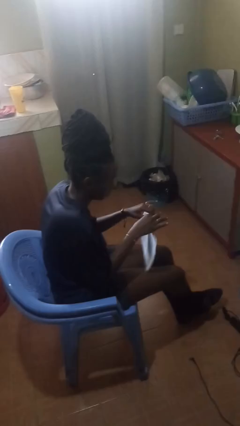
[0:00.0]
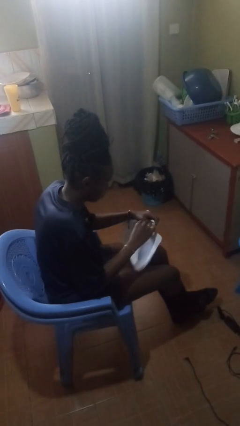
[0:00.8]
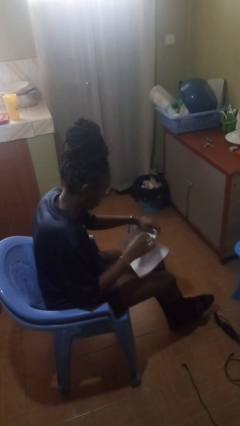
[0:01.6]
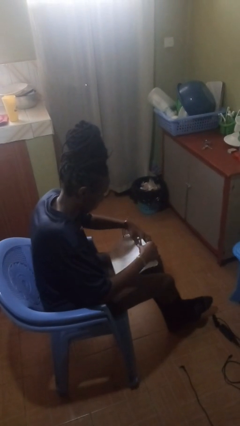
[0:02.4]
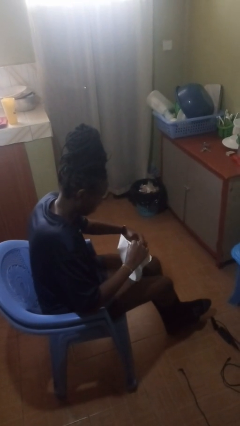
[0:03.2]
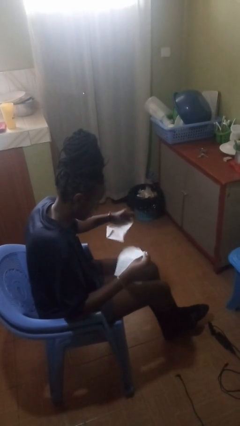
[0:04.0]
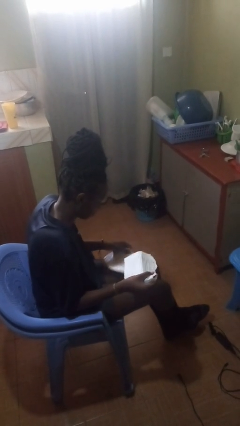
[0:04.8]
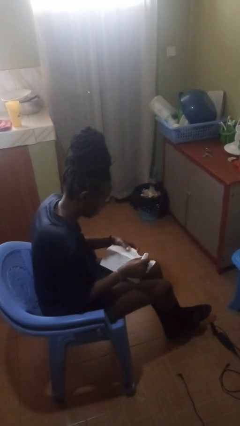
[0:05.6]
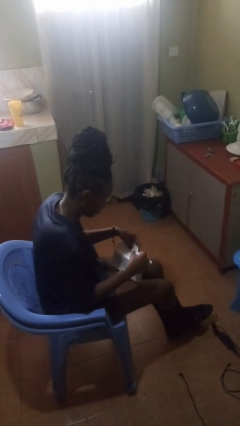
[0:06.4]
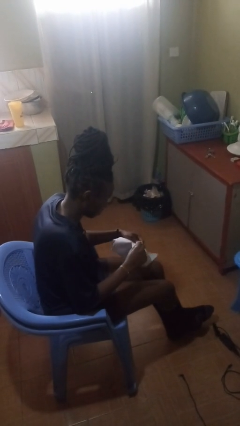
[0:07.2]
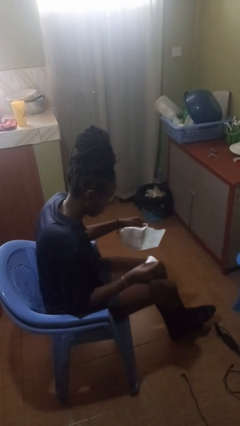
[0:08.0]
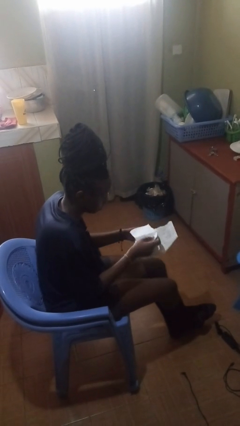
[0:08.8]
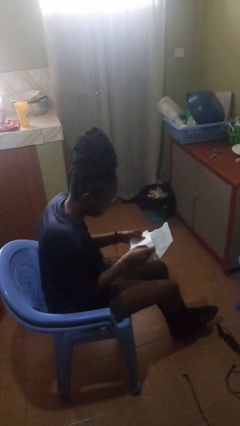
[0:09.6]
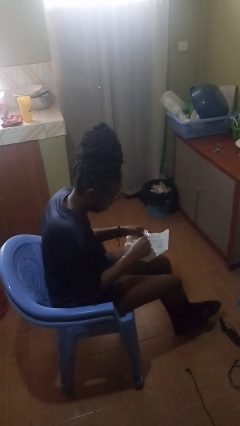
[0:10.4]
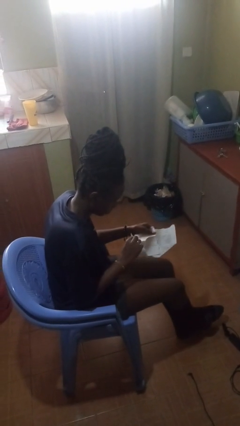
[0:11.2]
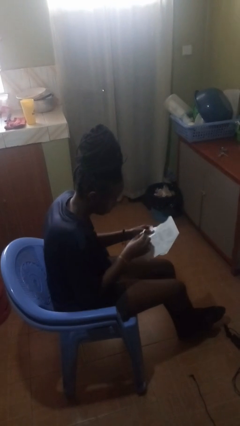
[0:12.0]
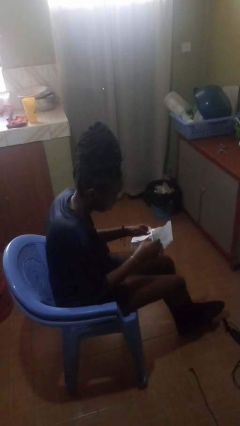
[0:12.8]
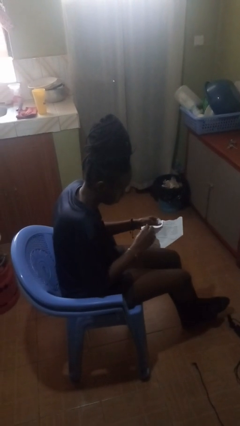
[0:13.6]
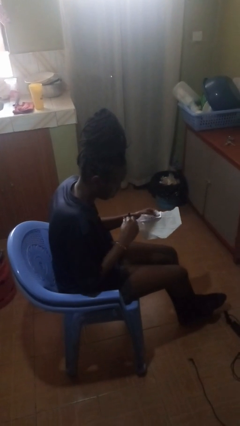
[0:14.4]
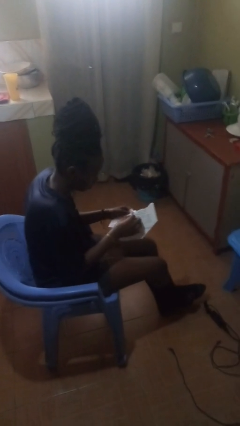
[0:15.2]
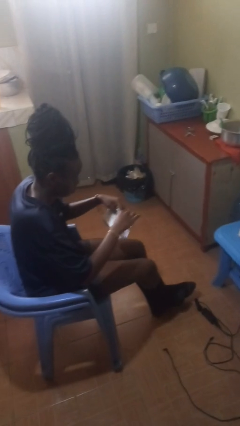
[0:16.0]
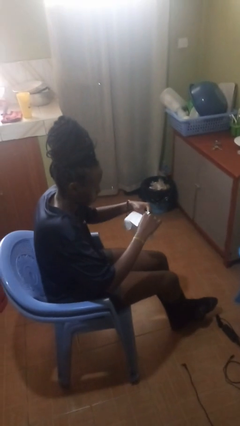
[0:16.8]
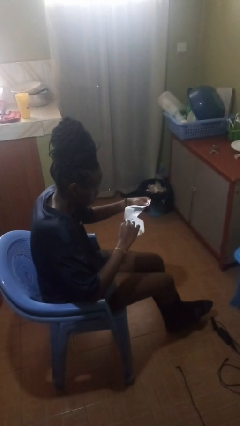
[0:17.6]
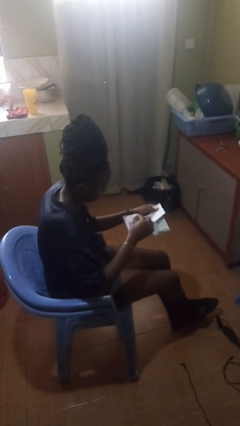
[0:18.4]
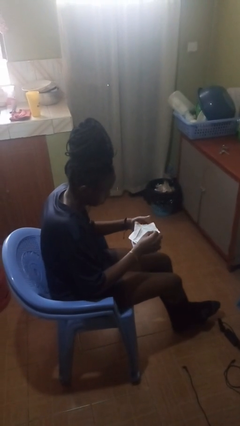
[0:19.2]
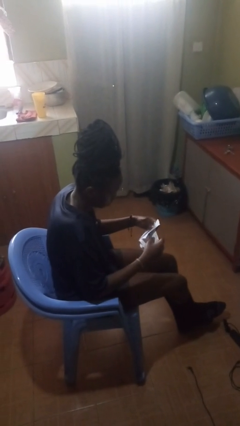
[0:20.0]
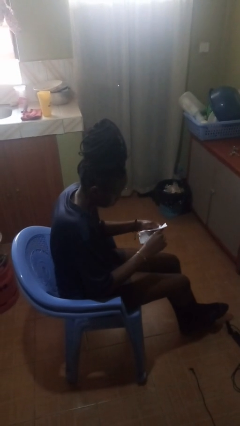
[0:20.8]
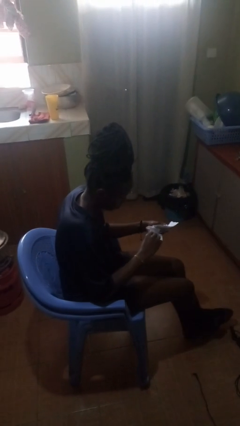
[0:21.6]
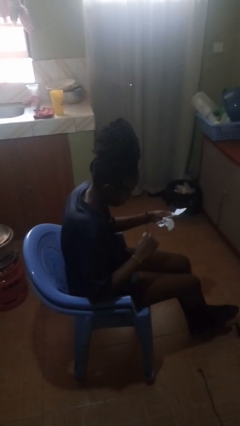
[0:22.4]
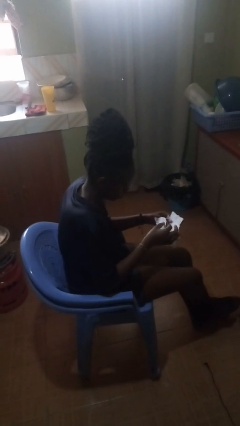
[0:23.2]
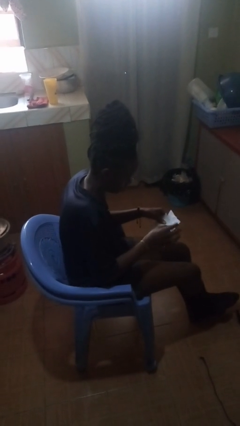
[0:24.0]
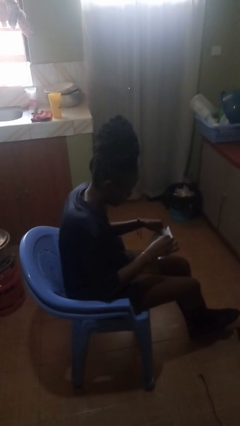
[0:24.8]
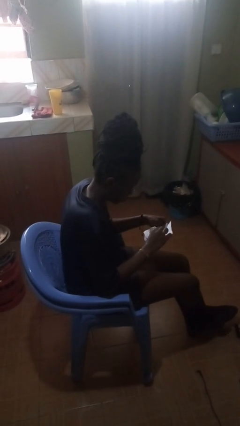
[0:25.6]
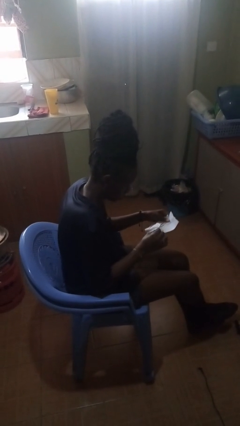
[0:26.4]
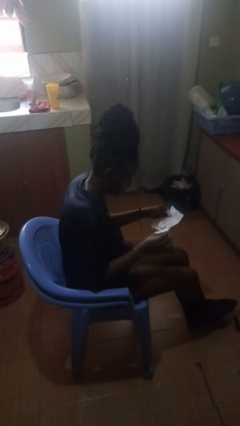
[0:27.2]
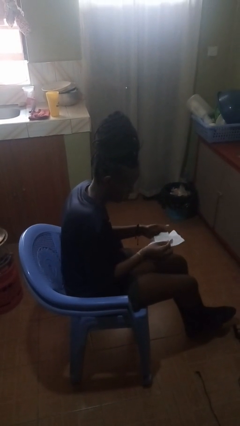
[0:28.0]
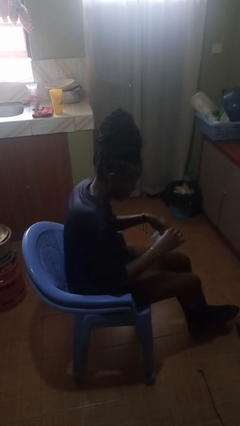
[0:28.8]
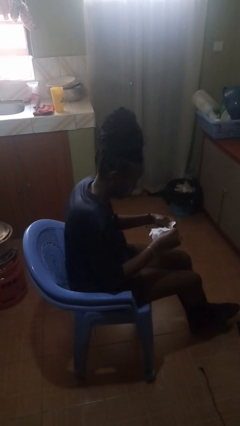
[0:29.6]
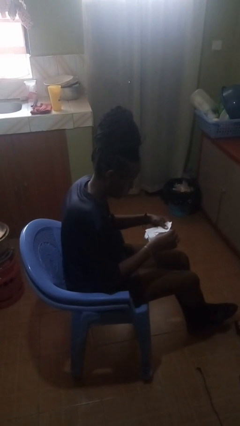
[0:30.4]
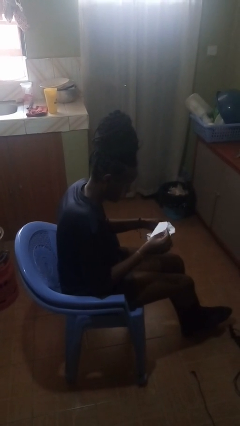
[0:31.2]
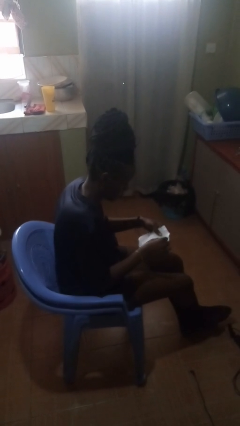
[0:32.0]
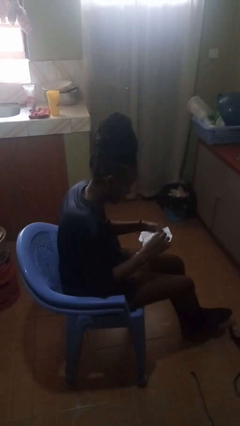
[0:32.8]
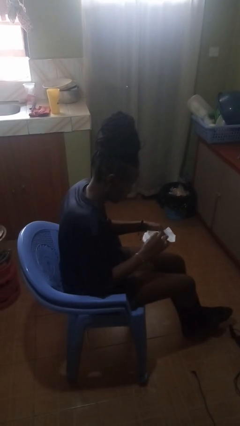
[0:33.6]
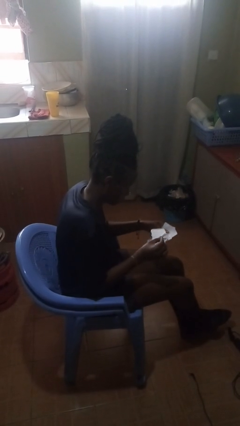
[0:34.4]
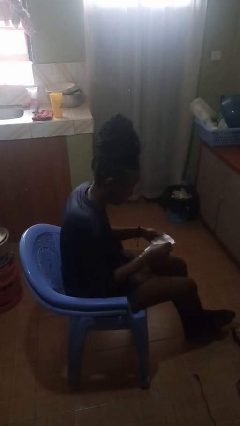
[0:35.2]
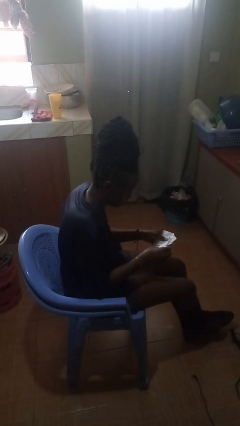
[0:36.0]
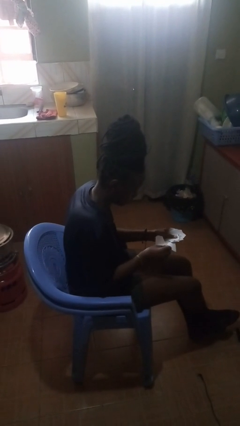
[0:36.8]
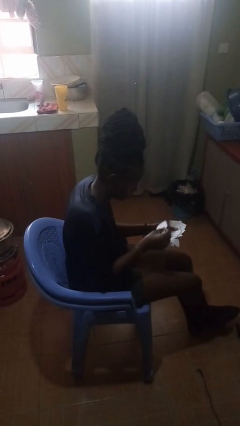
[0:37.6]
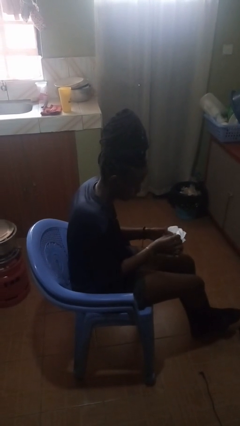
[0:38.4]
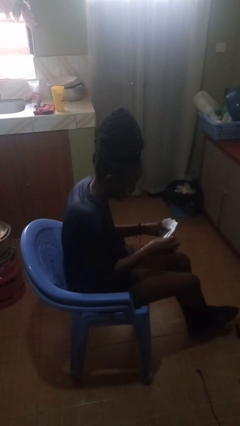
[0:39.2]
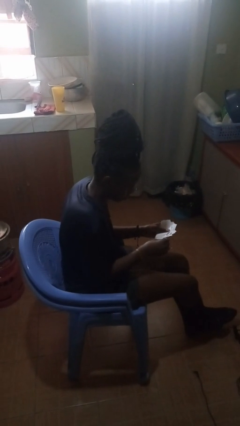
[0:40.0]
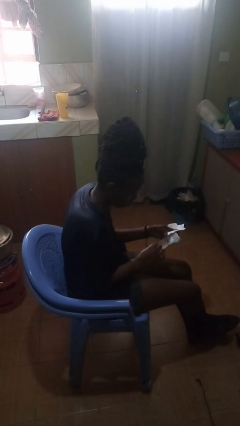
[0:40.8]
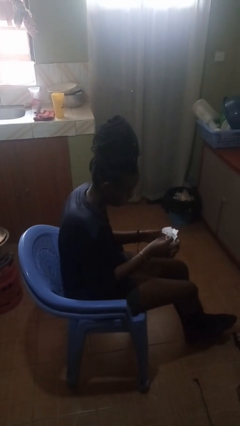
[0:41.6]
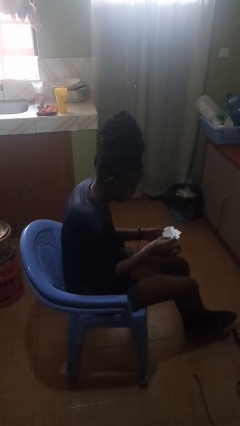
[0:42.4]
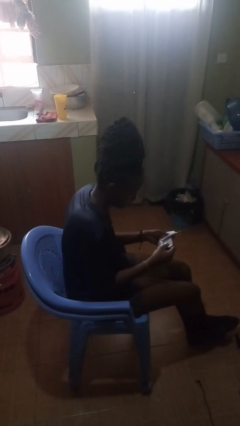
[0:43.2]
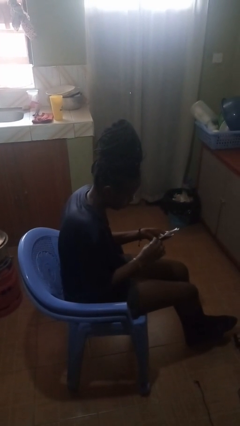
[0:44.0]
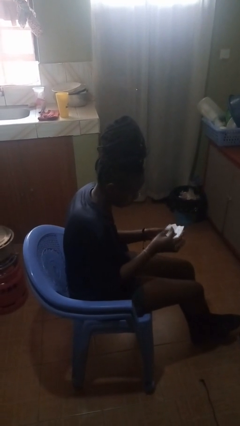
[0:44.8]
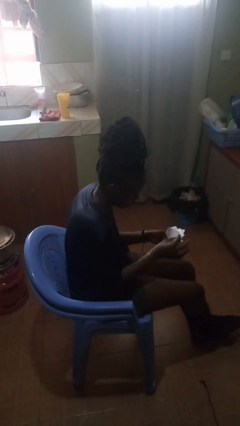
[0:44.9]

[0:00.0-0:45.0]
person tears paper

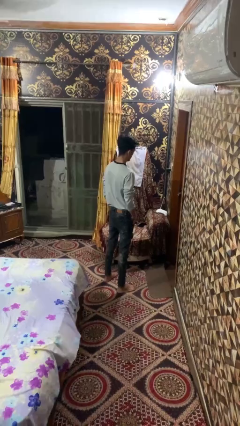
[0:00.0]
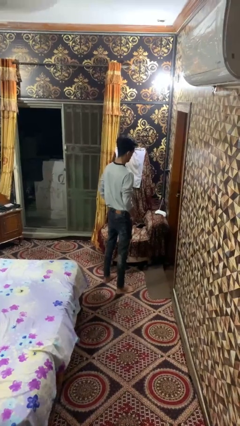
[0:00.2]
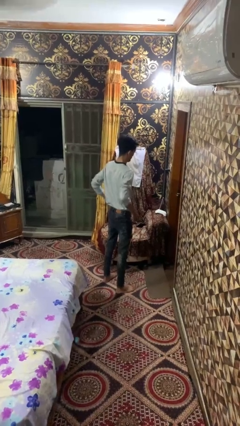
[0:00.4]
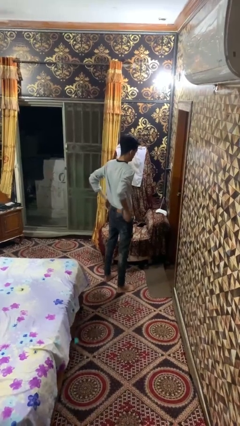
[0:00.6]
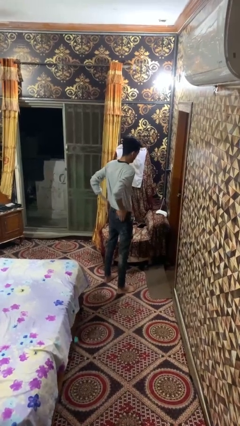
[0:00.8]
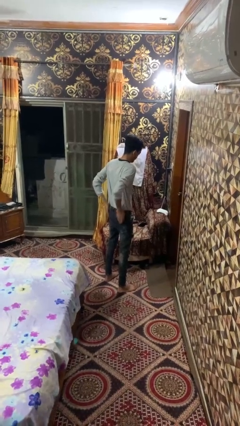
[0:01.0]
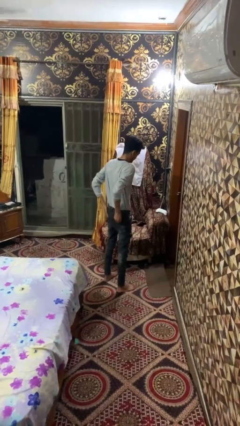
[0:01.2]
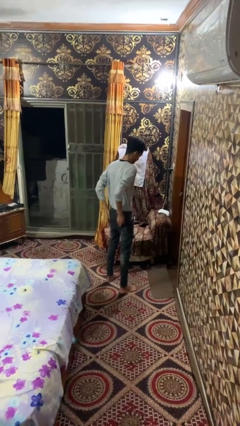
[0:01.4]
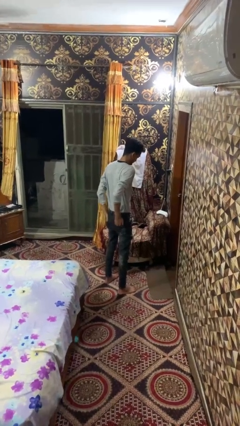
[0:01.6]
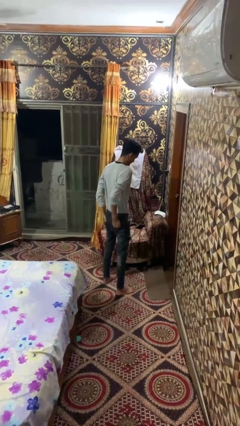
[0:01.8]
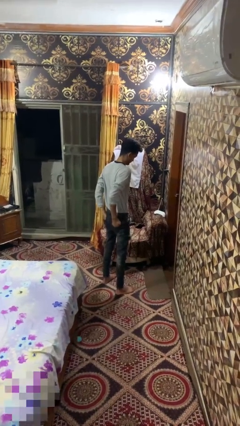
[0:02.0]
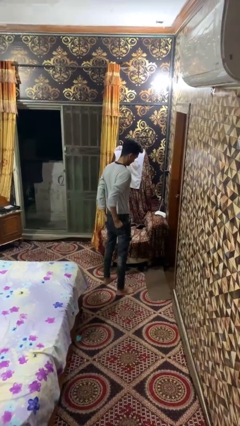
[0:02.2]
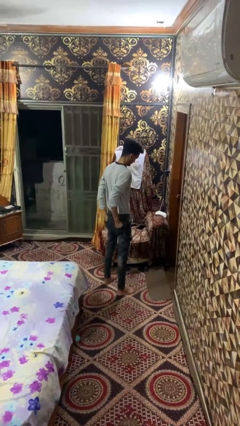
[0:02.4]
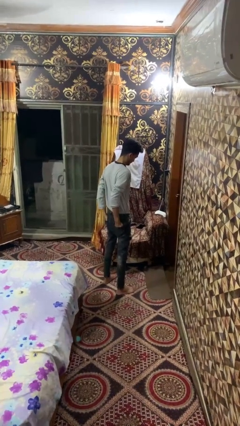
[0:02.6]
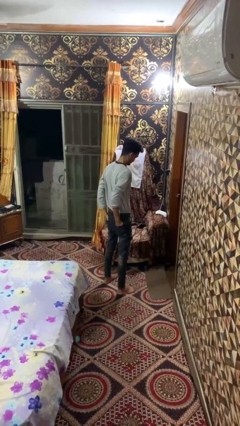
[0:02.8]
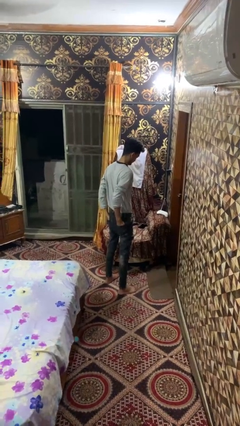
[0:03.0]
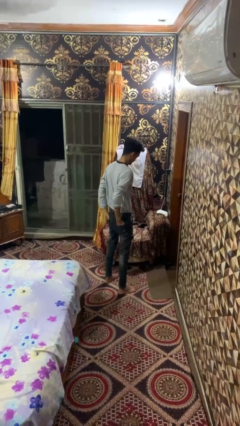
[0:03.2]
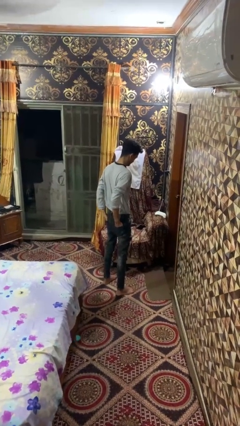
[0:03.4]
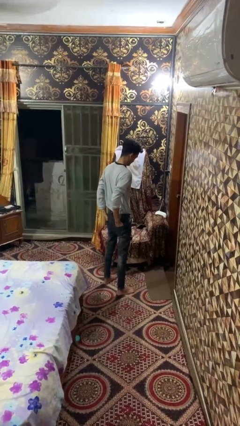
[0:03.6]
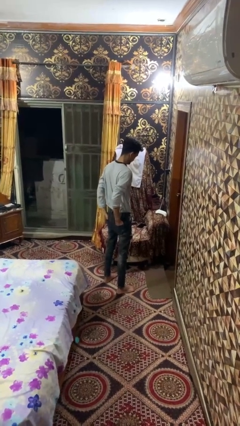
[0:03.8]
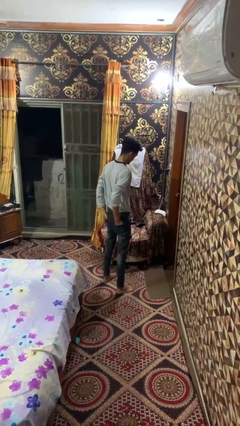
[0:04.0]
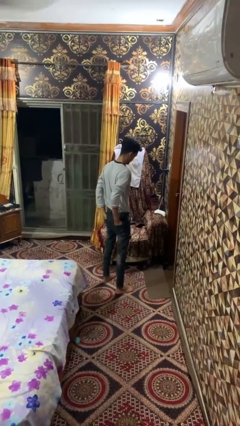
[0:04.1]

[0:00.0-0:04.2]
person puts hands in back pockets

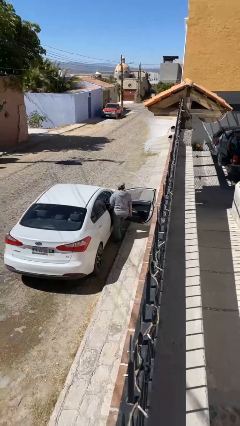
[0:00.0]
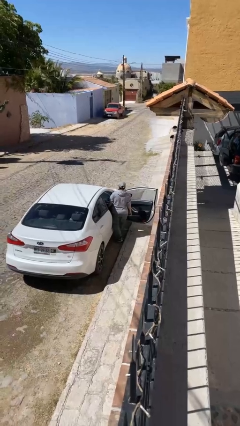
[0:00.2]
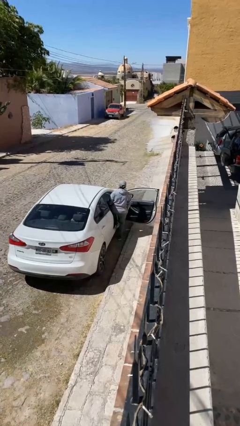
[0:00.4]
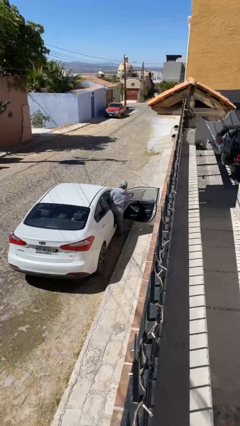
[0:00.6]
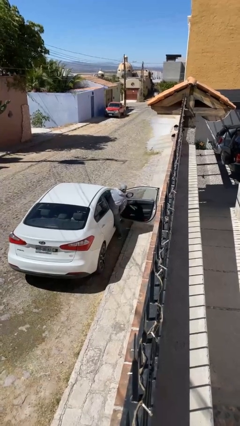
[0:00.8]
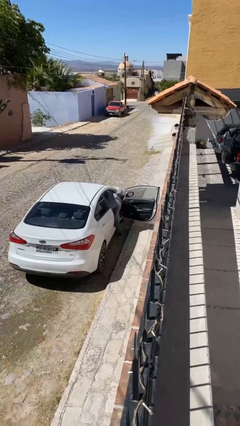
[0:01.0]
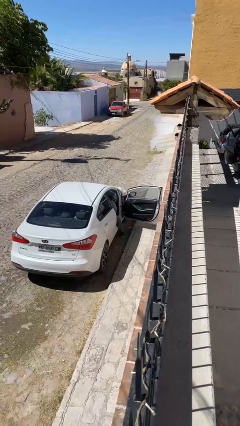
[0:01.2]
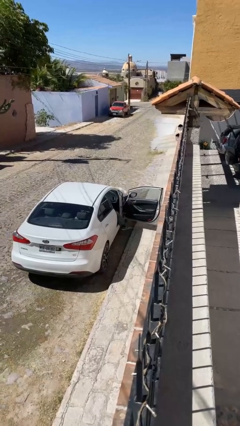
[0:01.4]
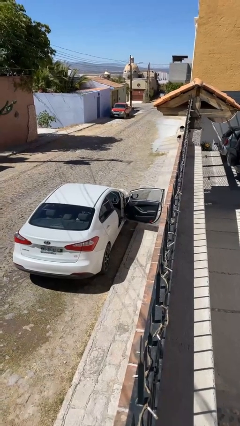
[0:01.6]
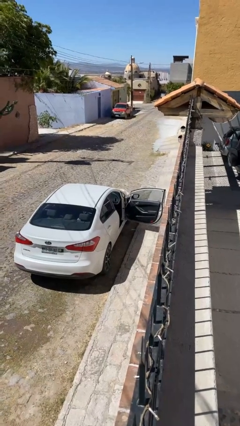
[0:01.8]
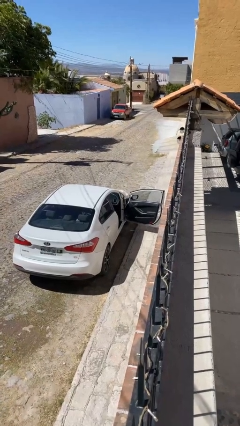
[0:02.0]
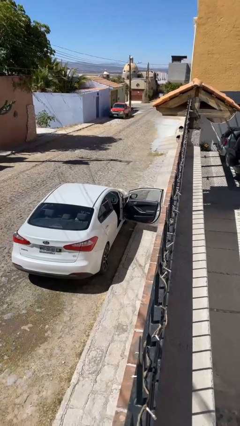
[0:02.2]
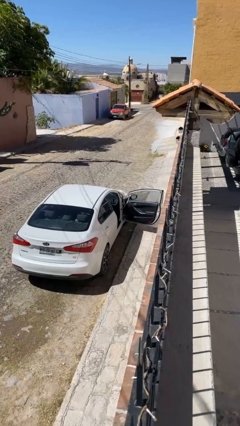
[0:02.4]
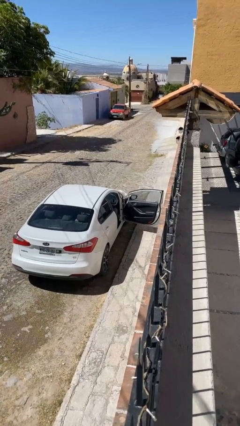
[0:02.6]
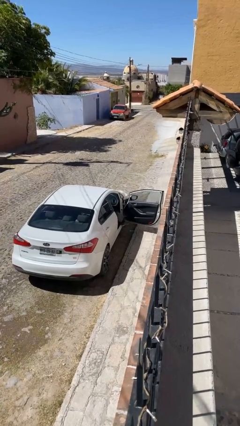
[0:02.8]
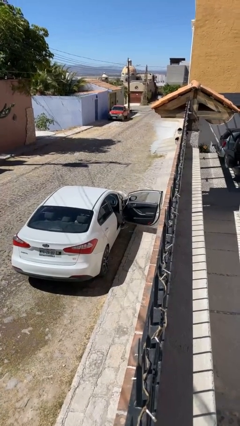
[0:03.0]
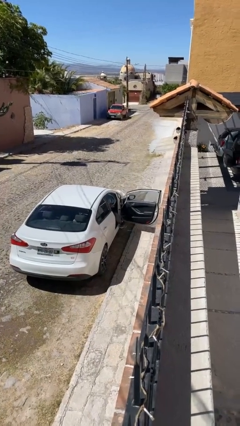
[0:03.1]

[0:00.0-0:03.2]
person enters car
